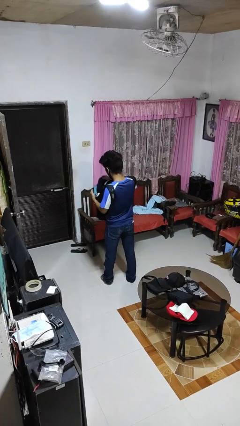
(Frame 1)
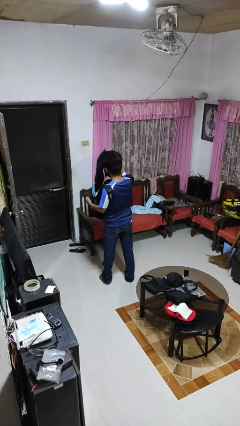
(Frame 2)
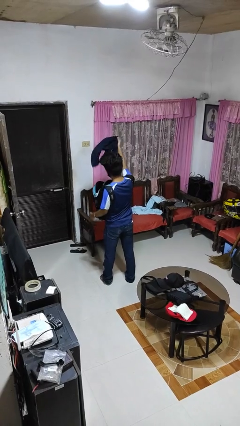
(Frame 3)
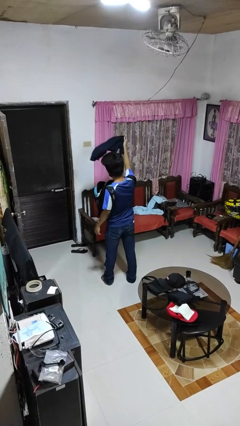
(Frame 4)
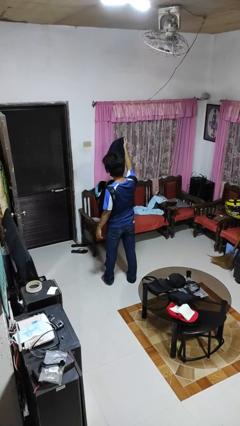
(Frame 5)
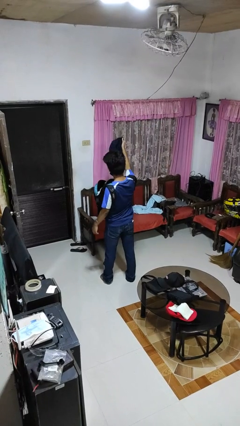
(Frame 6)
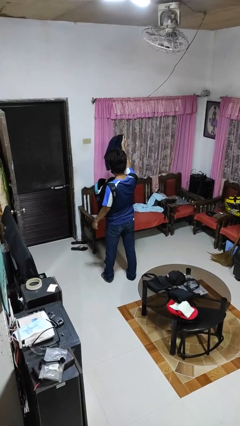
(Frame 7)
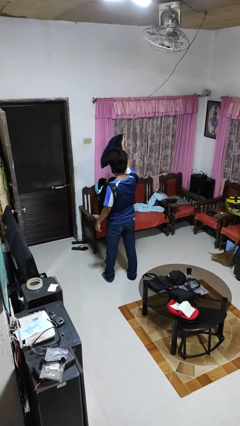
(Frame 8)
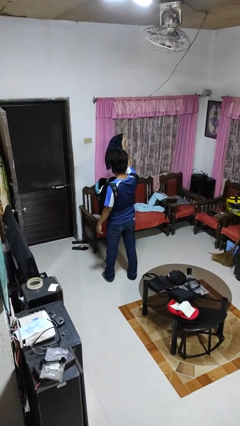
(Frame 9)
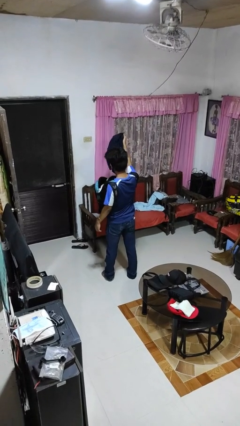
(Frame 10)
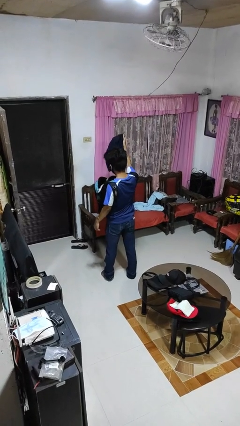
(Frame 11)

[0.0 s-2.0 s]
person takes object from backpack

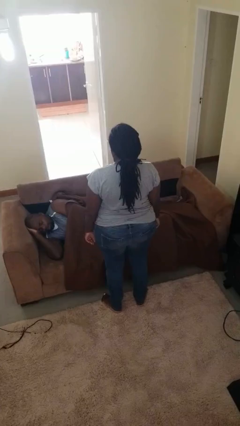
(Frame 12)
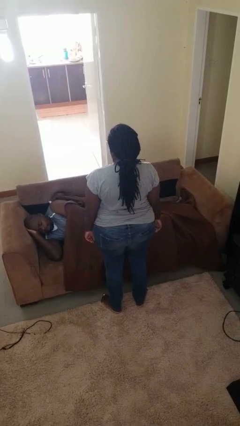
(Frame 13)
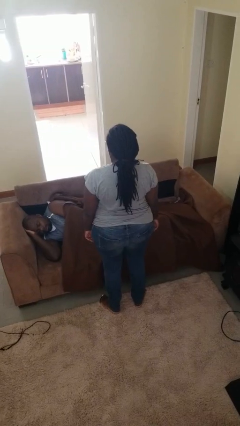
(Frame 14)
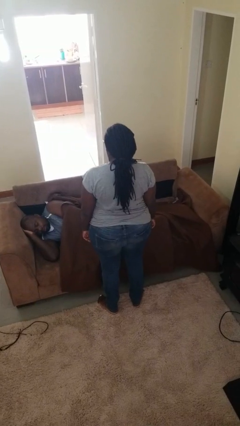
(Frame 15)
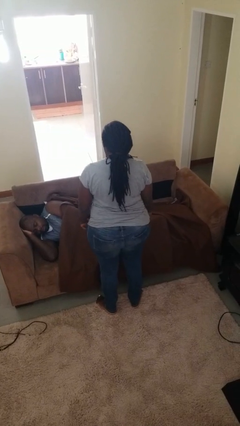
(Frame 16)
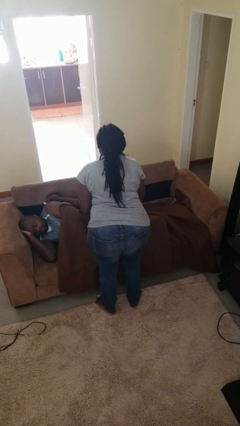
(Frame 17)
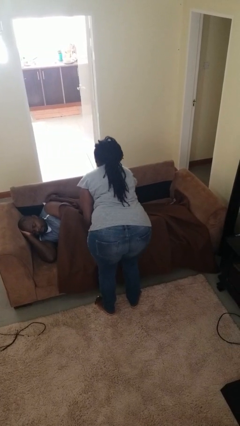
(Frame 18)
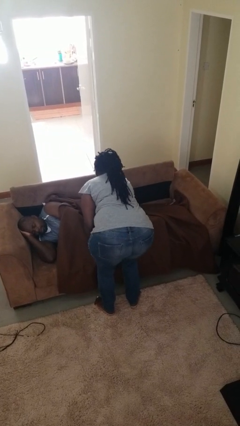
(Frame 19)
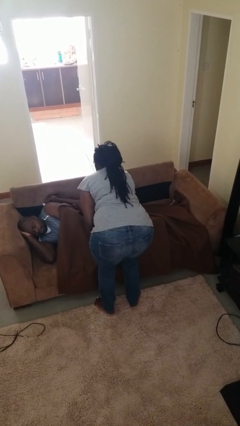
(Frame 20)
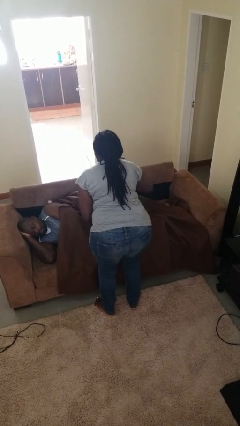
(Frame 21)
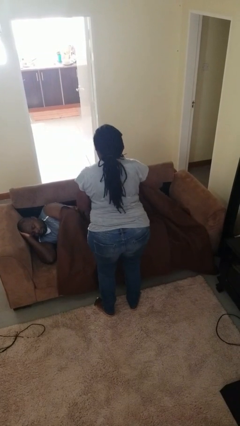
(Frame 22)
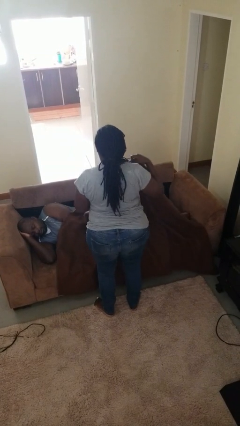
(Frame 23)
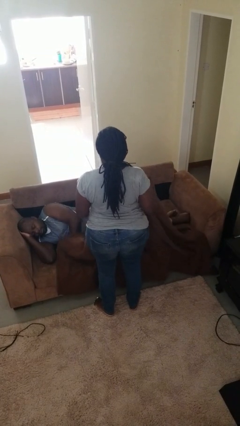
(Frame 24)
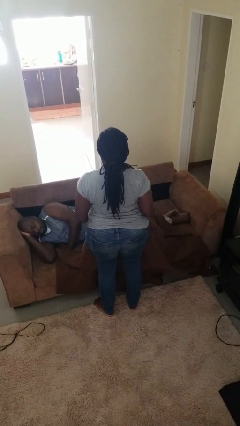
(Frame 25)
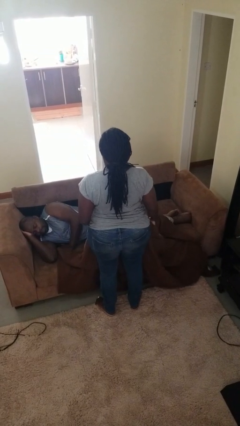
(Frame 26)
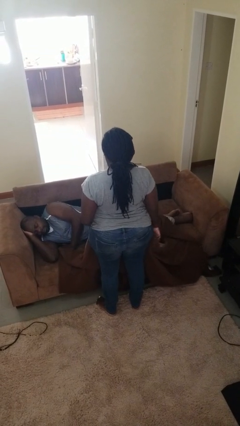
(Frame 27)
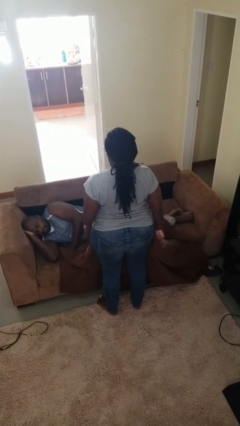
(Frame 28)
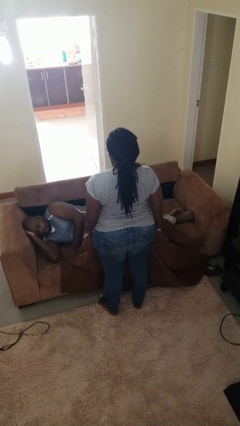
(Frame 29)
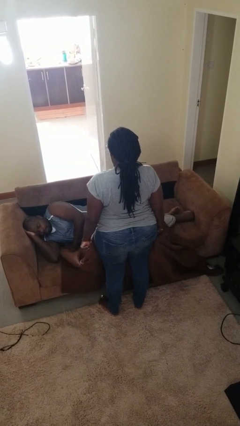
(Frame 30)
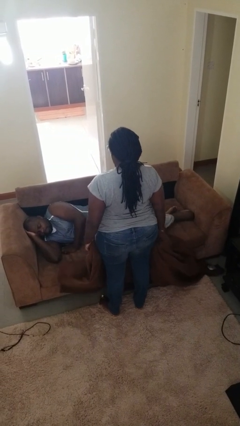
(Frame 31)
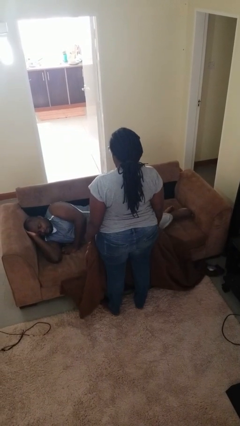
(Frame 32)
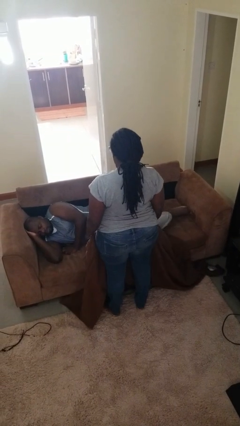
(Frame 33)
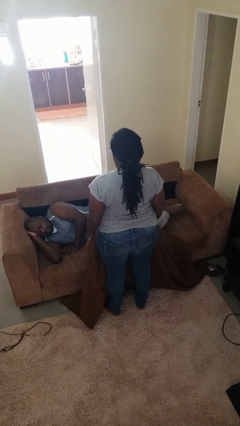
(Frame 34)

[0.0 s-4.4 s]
person uncovers friend with blanket

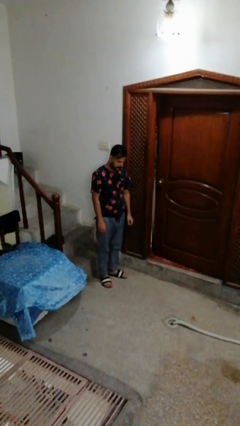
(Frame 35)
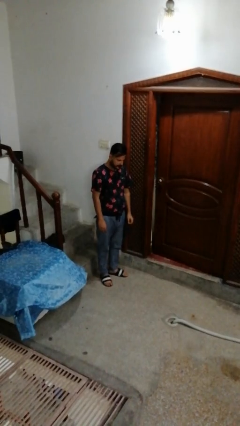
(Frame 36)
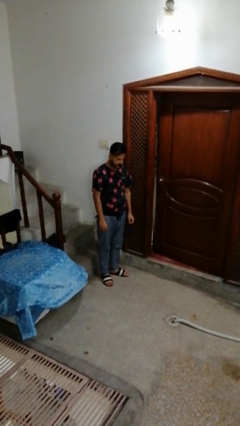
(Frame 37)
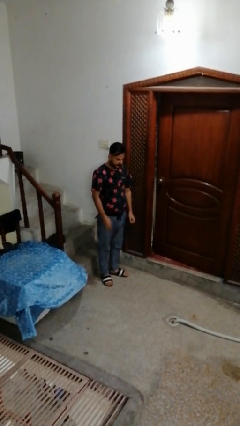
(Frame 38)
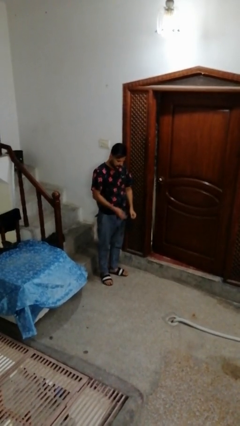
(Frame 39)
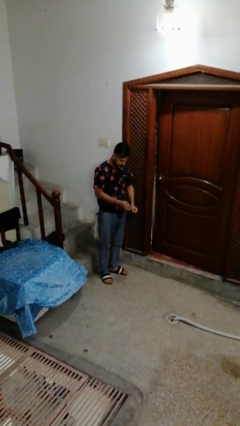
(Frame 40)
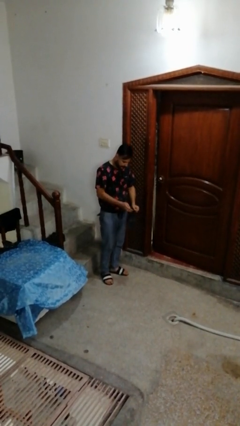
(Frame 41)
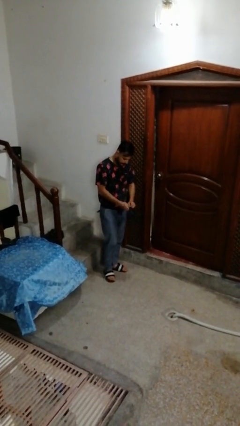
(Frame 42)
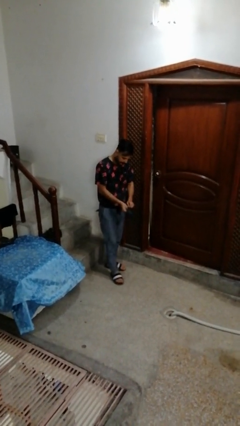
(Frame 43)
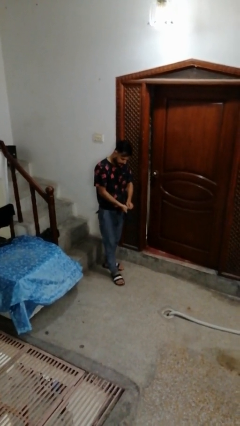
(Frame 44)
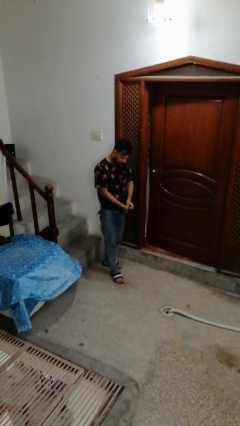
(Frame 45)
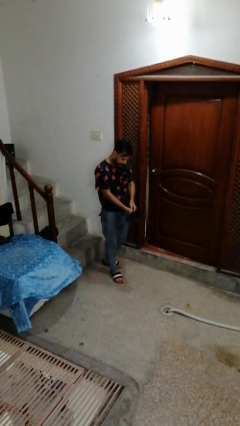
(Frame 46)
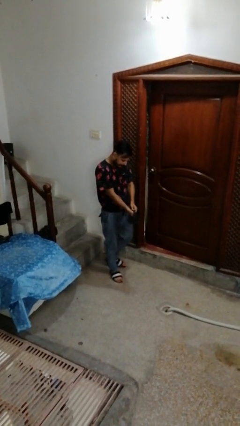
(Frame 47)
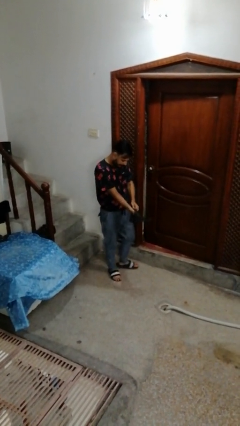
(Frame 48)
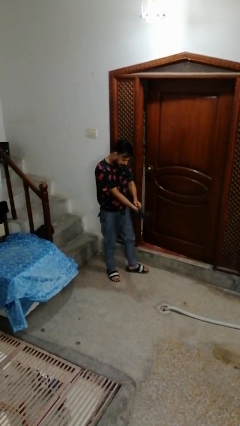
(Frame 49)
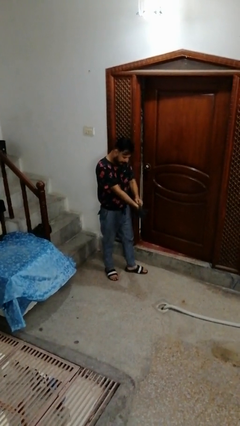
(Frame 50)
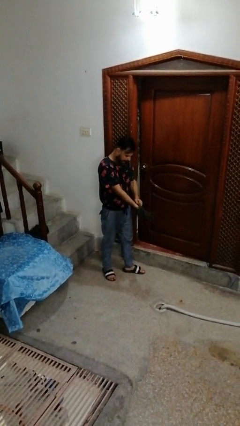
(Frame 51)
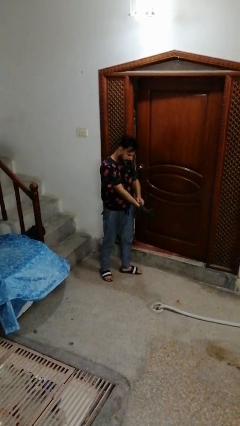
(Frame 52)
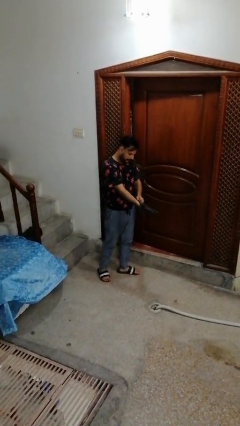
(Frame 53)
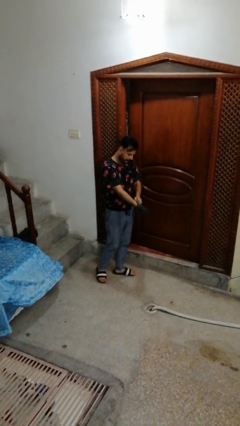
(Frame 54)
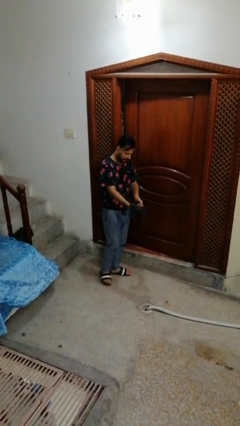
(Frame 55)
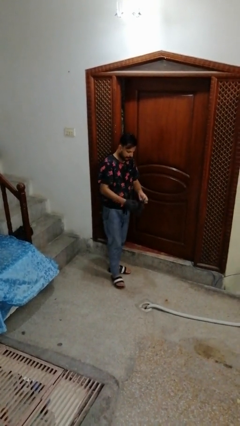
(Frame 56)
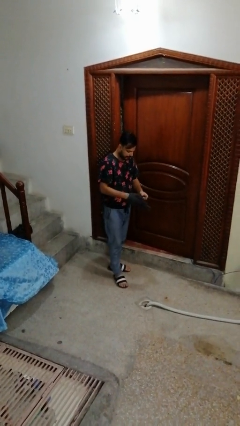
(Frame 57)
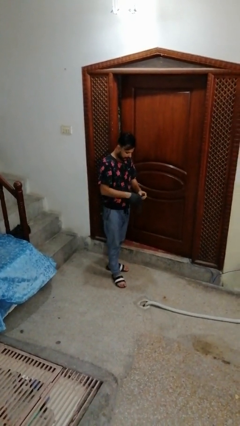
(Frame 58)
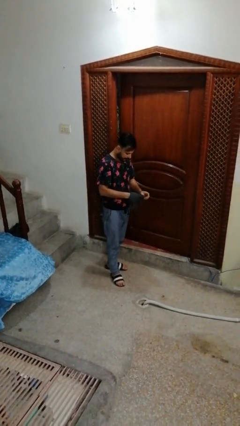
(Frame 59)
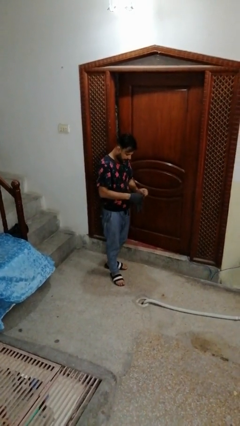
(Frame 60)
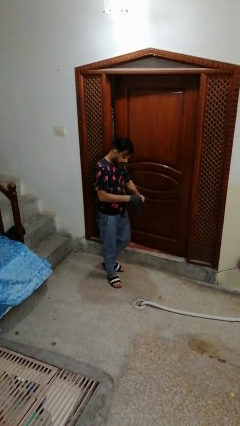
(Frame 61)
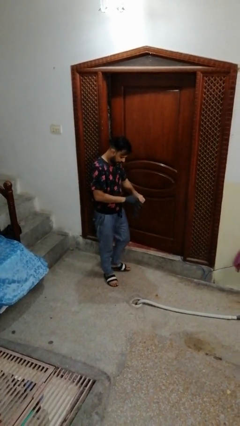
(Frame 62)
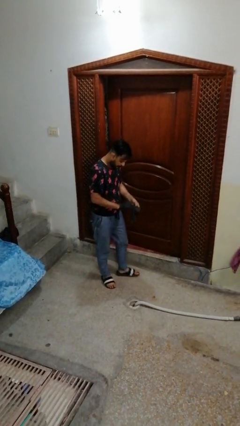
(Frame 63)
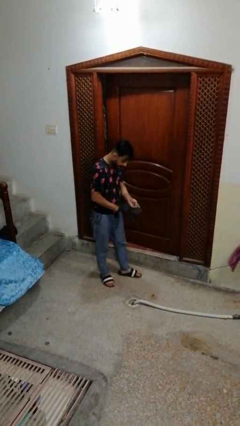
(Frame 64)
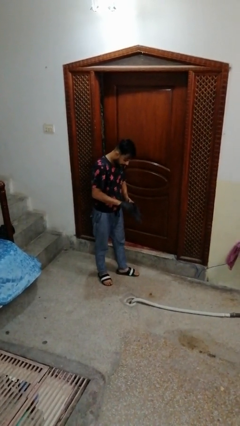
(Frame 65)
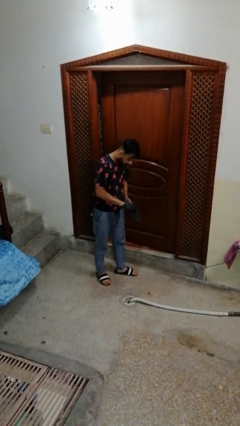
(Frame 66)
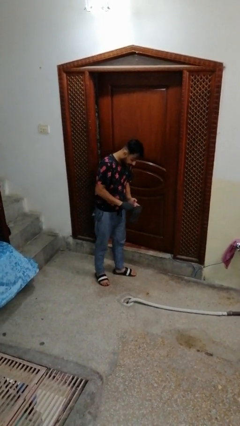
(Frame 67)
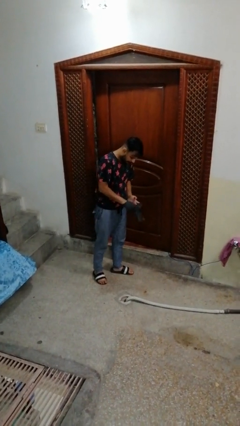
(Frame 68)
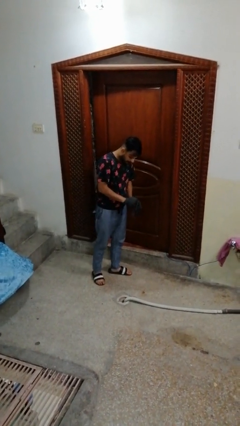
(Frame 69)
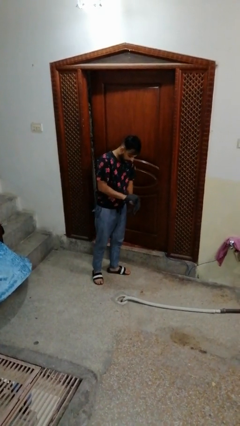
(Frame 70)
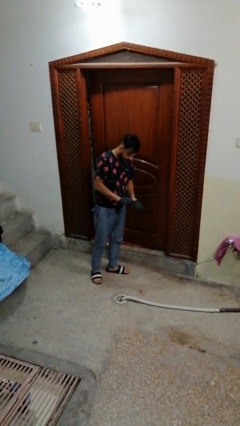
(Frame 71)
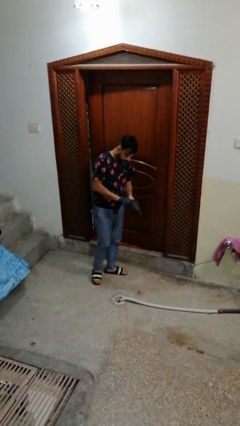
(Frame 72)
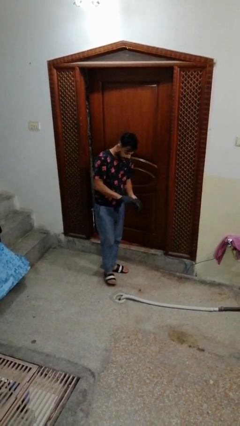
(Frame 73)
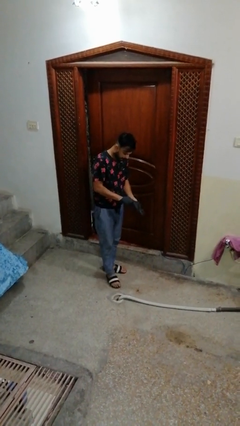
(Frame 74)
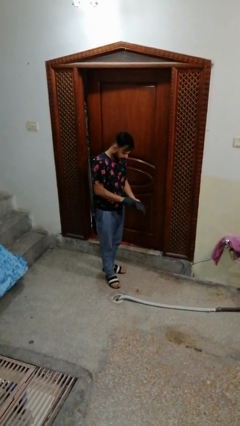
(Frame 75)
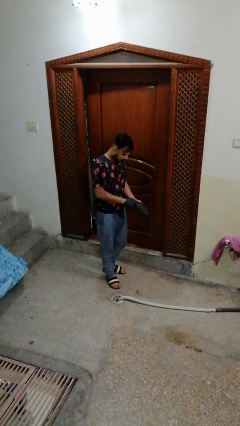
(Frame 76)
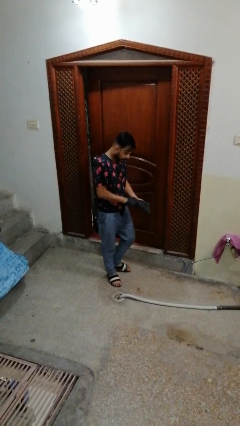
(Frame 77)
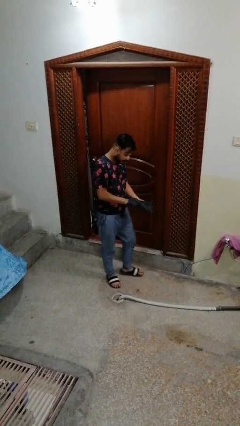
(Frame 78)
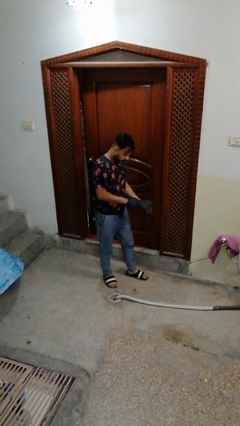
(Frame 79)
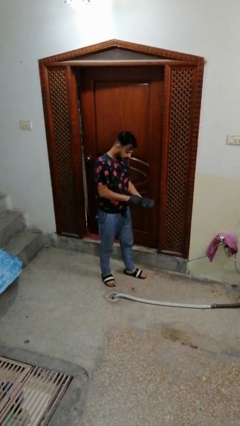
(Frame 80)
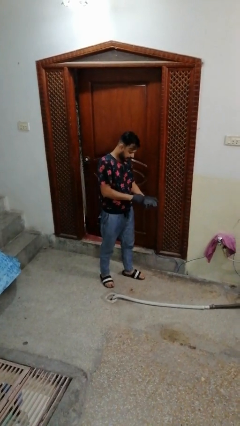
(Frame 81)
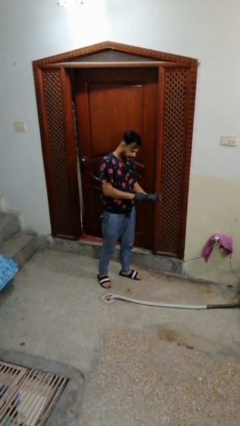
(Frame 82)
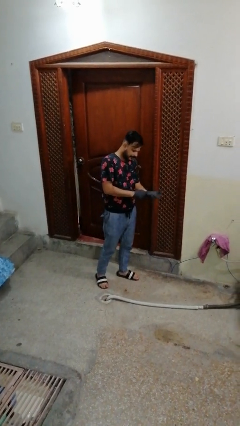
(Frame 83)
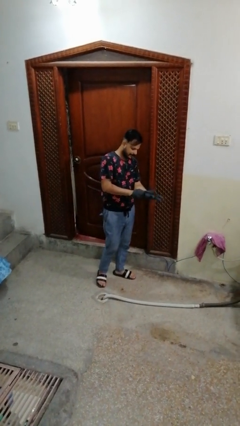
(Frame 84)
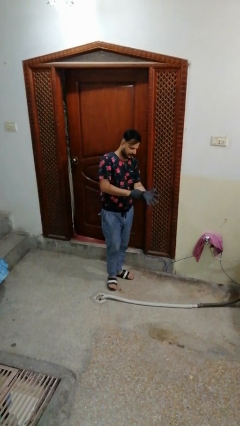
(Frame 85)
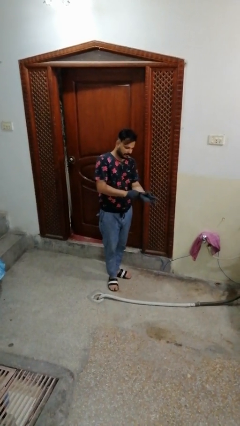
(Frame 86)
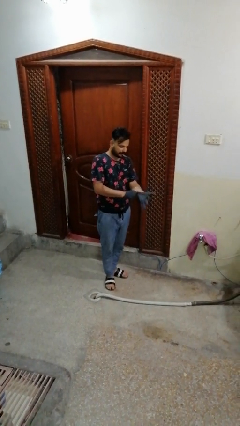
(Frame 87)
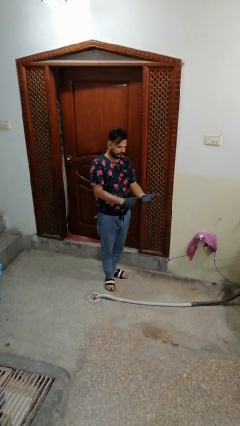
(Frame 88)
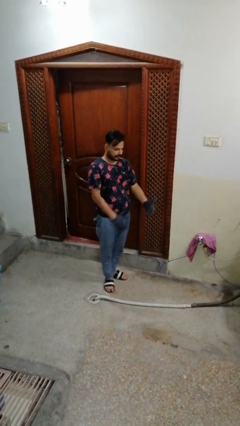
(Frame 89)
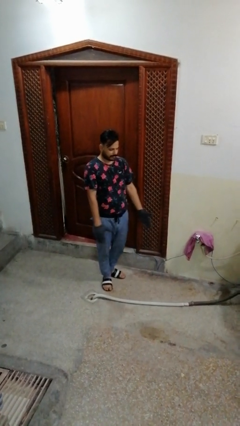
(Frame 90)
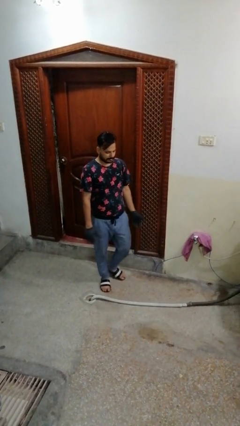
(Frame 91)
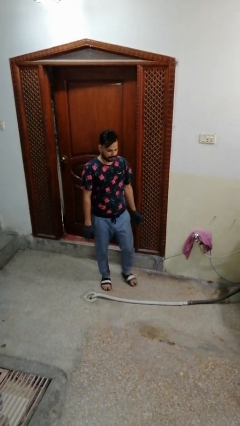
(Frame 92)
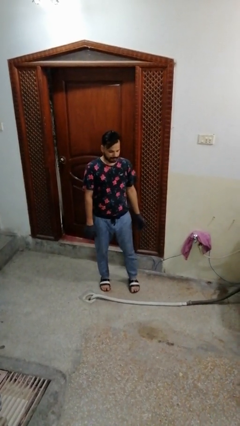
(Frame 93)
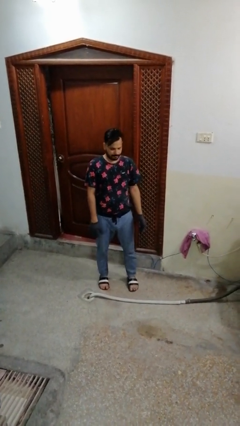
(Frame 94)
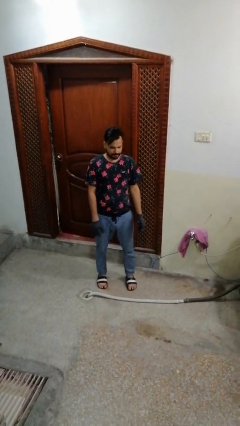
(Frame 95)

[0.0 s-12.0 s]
person puts on gloves
